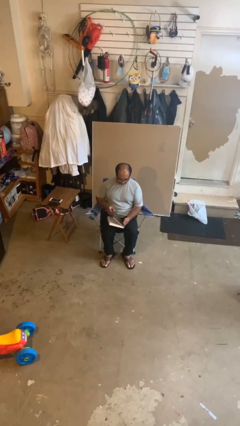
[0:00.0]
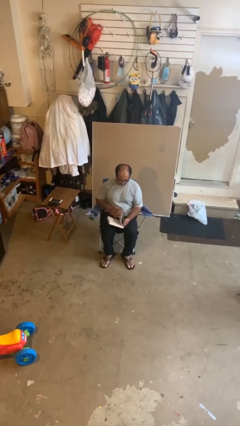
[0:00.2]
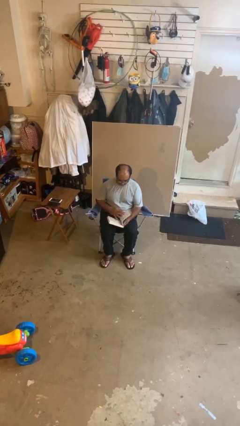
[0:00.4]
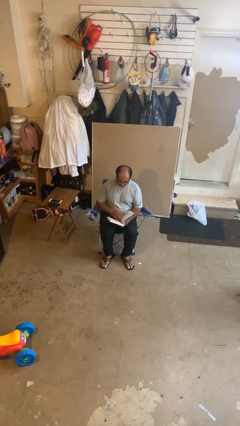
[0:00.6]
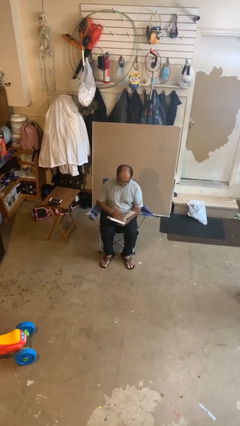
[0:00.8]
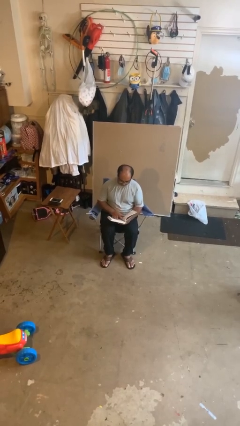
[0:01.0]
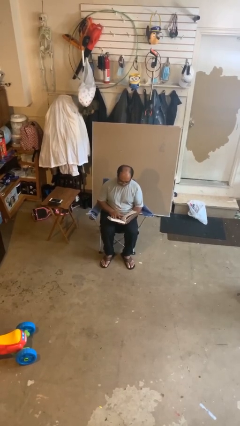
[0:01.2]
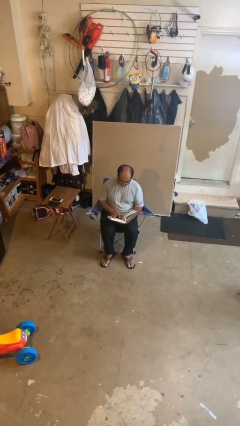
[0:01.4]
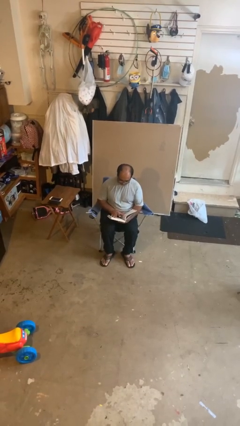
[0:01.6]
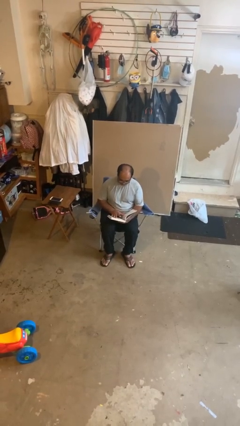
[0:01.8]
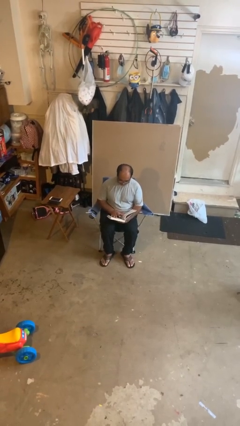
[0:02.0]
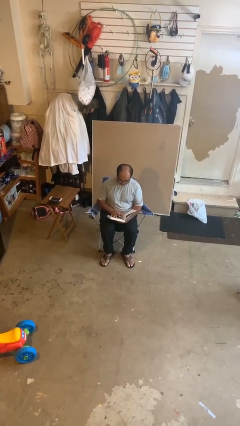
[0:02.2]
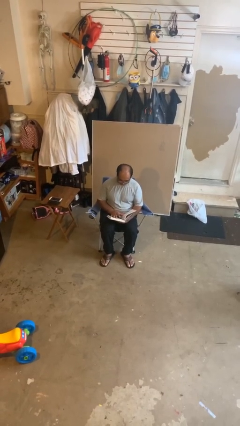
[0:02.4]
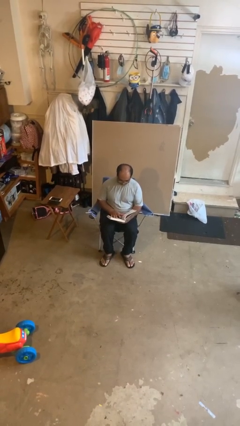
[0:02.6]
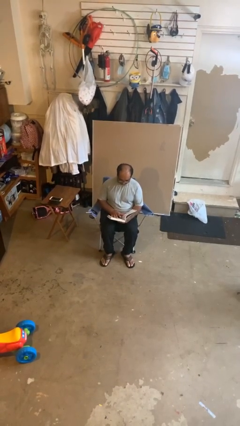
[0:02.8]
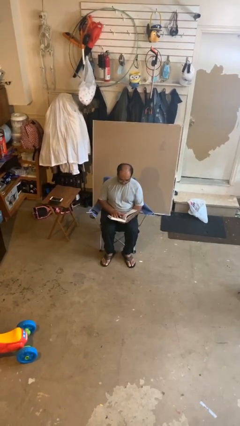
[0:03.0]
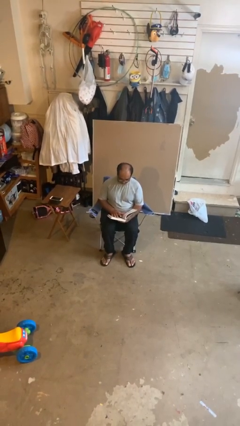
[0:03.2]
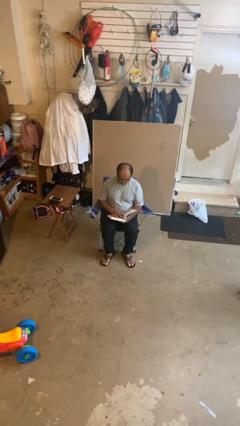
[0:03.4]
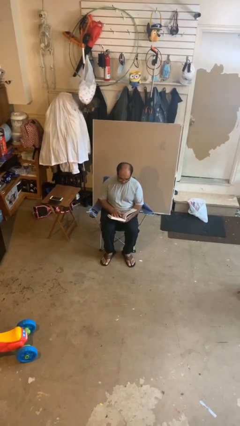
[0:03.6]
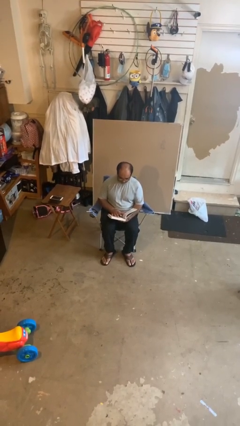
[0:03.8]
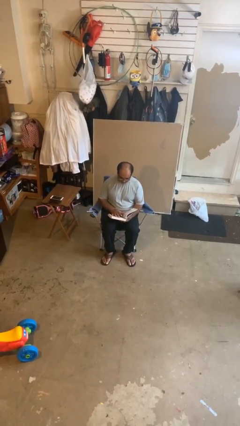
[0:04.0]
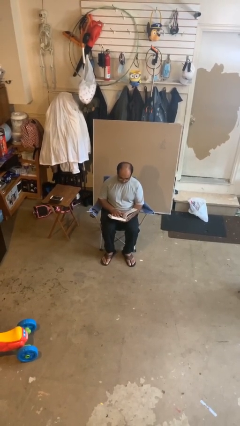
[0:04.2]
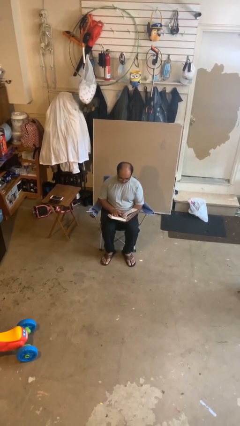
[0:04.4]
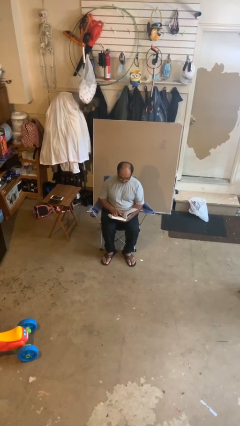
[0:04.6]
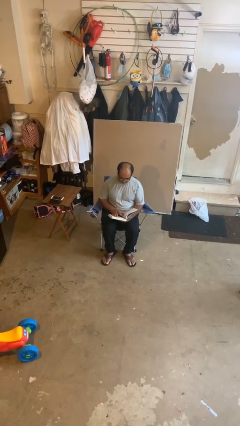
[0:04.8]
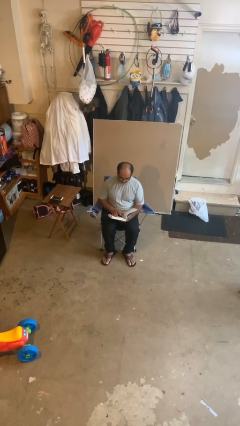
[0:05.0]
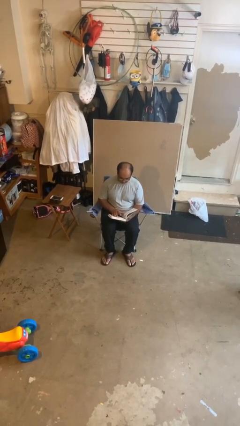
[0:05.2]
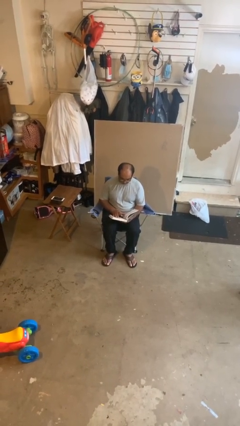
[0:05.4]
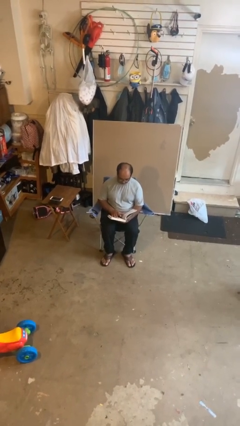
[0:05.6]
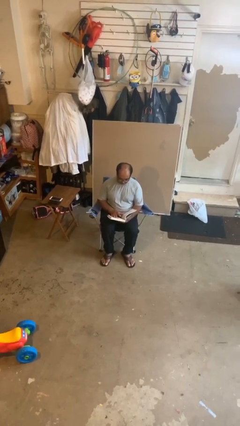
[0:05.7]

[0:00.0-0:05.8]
person reads document

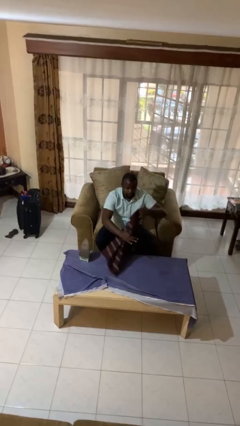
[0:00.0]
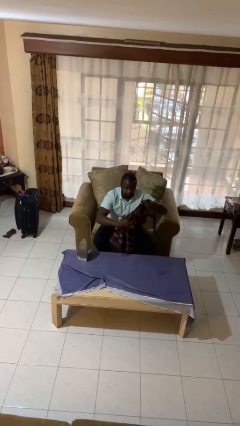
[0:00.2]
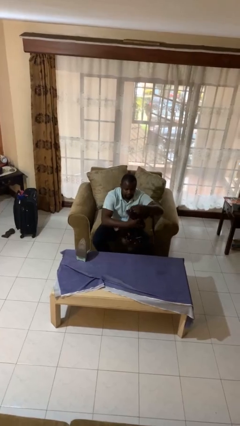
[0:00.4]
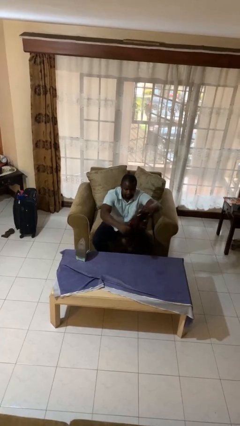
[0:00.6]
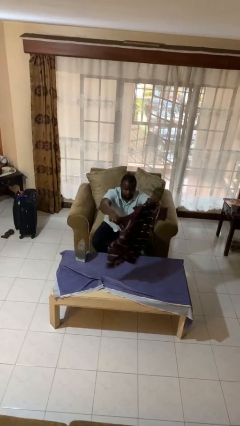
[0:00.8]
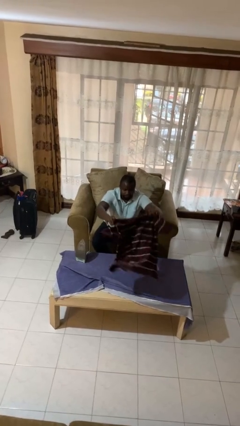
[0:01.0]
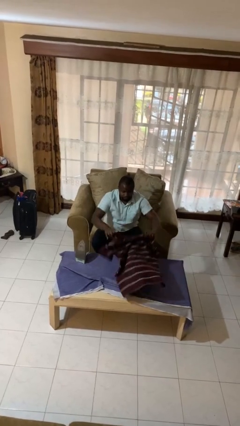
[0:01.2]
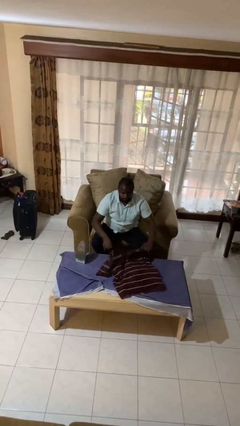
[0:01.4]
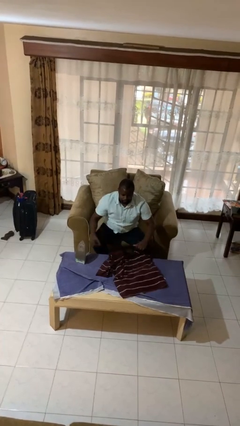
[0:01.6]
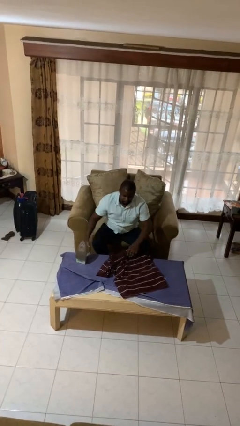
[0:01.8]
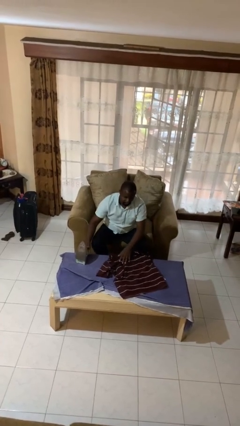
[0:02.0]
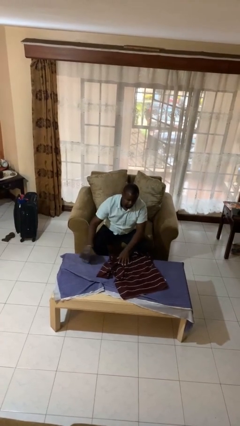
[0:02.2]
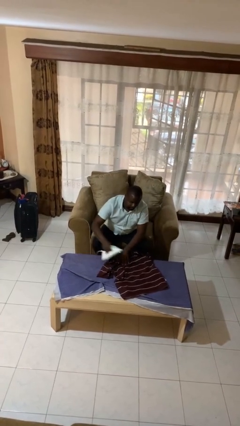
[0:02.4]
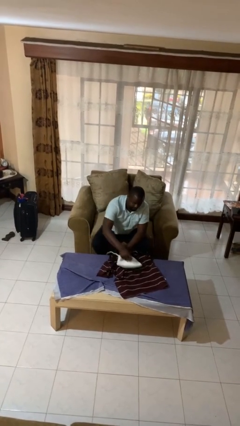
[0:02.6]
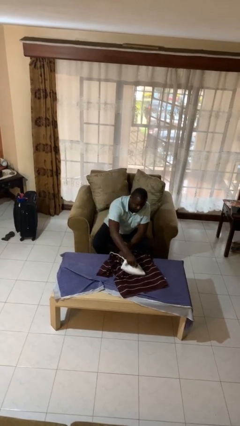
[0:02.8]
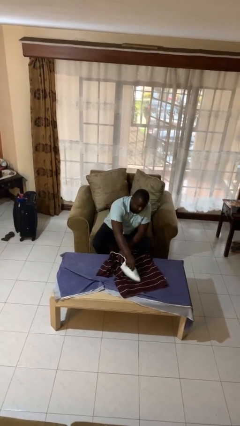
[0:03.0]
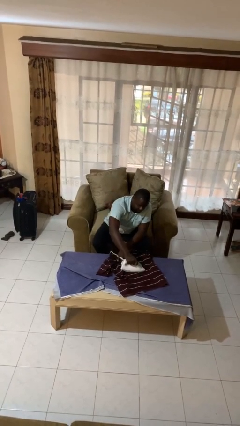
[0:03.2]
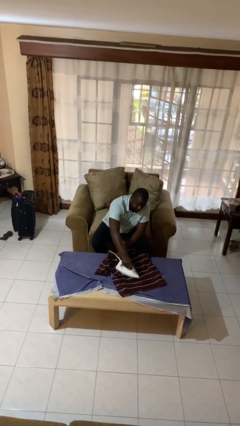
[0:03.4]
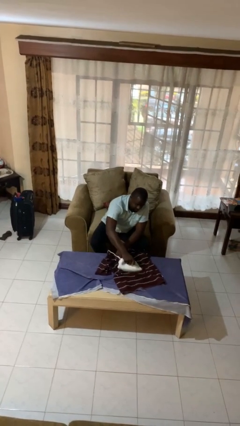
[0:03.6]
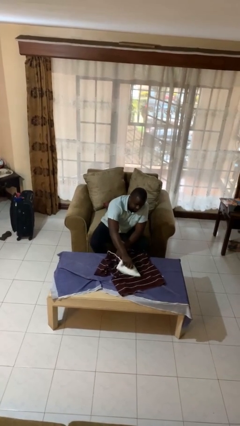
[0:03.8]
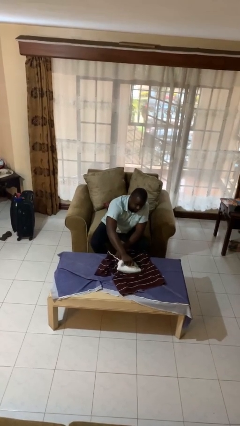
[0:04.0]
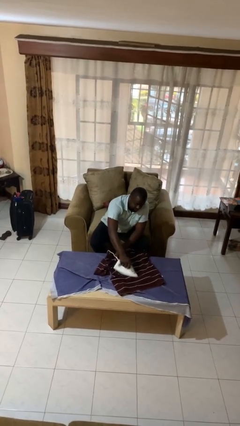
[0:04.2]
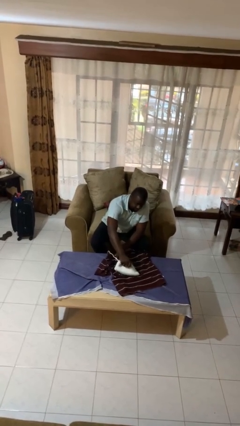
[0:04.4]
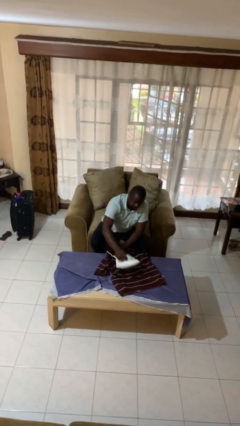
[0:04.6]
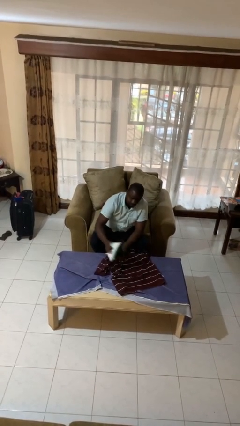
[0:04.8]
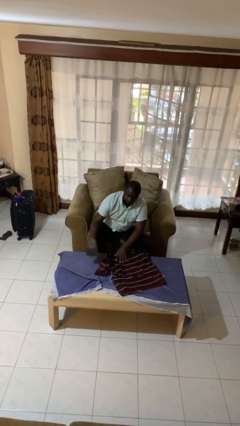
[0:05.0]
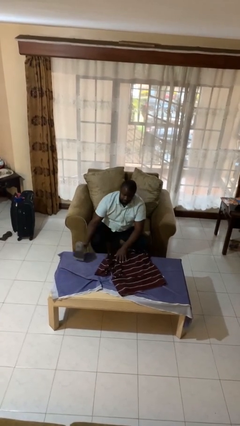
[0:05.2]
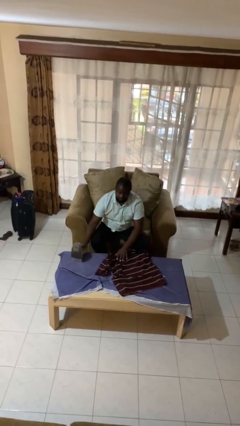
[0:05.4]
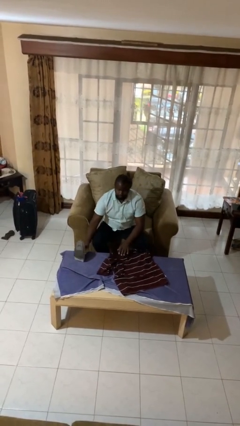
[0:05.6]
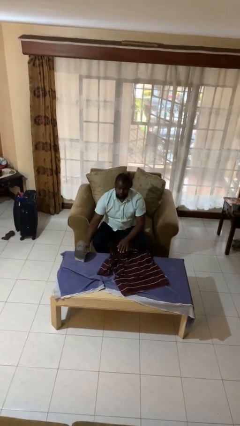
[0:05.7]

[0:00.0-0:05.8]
person irons clothes

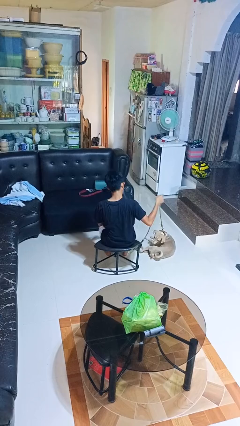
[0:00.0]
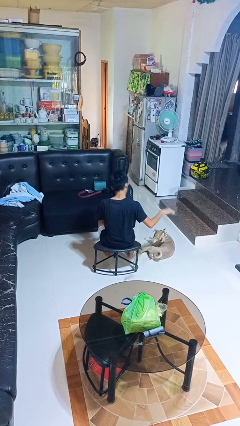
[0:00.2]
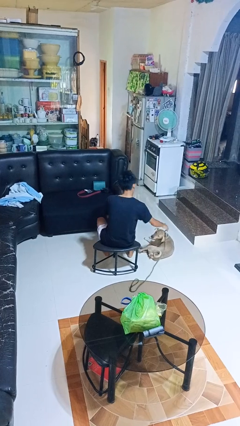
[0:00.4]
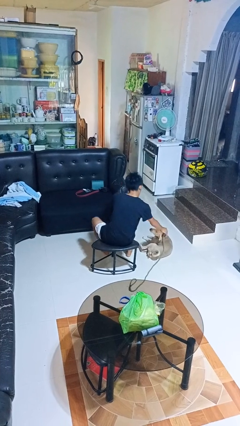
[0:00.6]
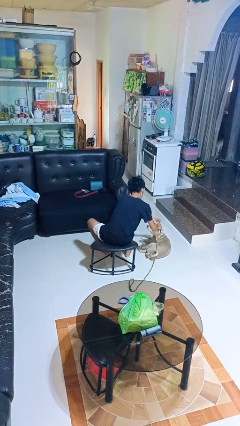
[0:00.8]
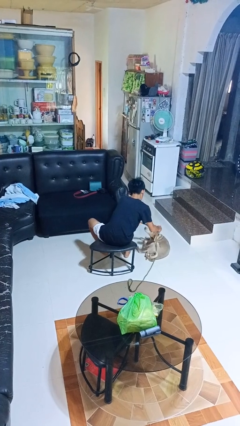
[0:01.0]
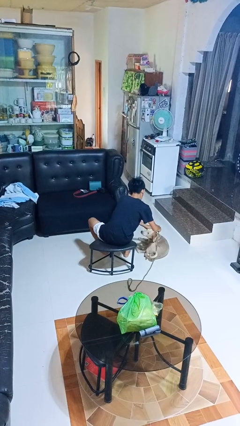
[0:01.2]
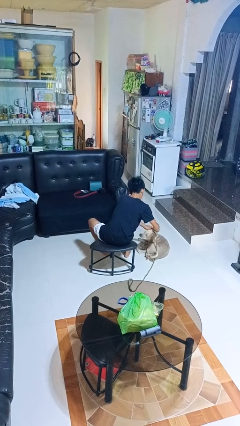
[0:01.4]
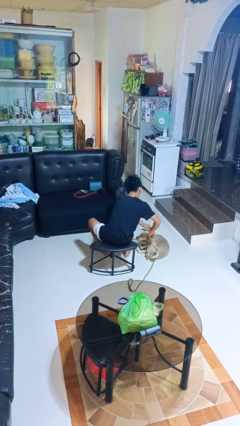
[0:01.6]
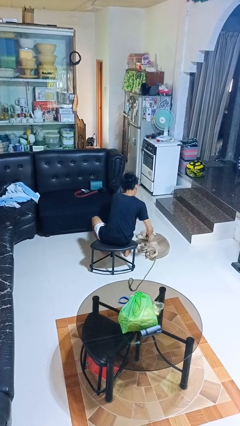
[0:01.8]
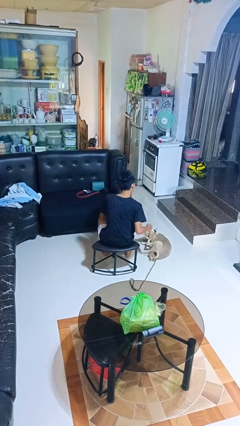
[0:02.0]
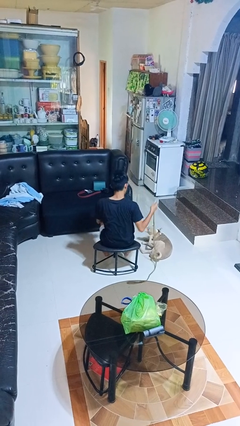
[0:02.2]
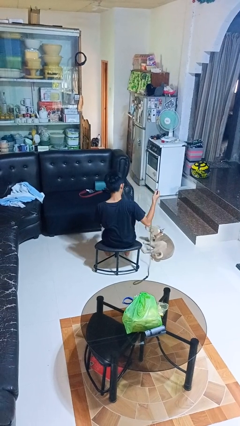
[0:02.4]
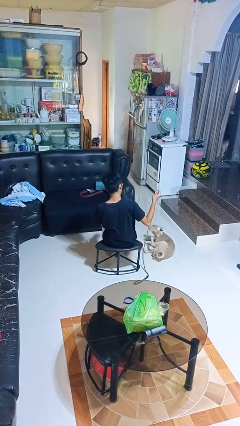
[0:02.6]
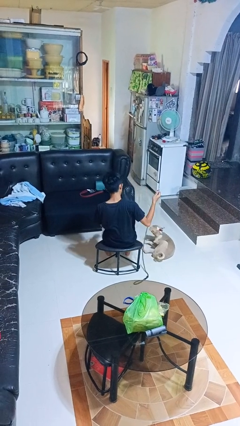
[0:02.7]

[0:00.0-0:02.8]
person unattaches leash from dog

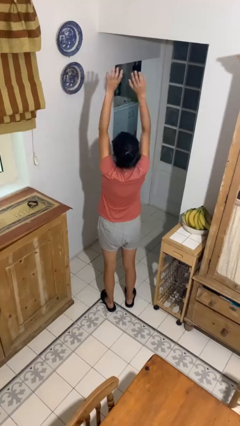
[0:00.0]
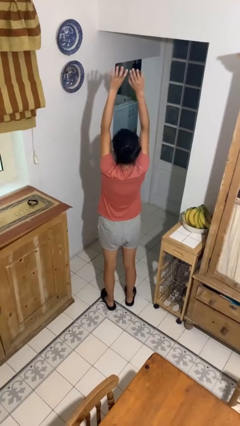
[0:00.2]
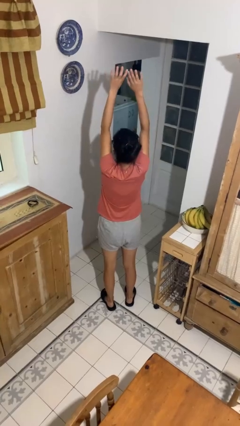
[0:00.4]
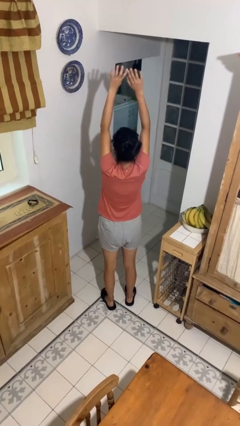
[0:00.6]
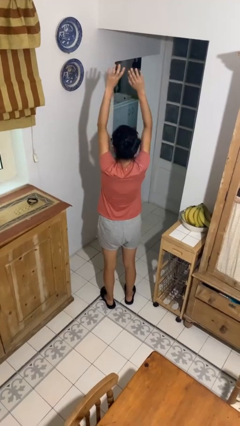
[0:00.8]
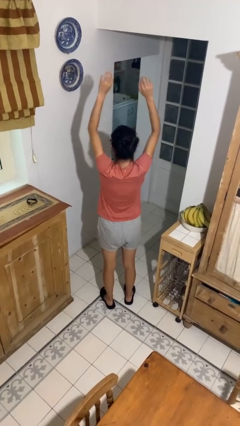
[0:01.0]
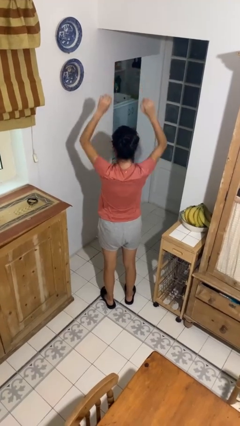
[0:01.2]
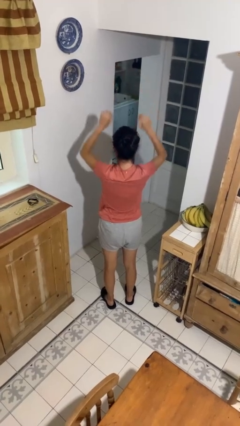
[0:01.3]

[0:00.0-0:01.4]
person stretches arms over head

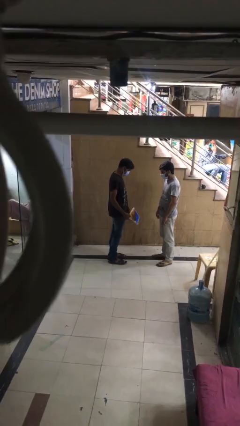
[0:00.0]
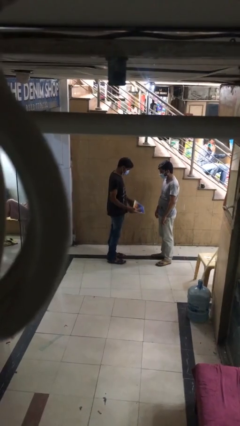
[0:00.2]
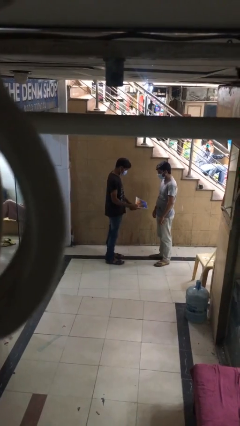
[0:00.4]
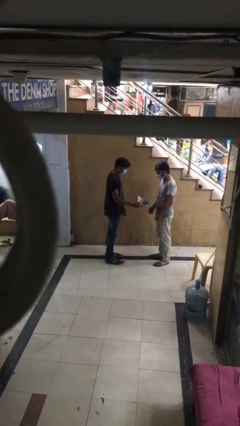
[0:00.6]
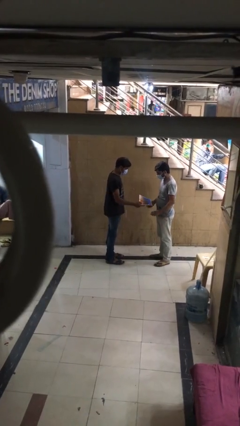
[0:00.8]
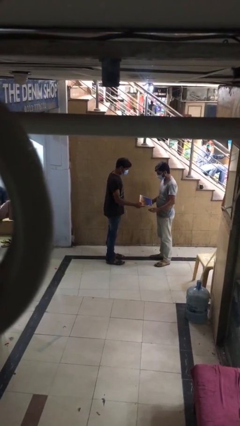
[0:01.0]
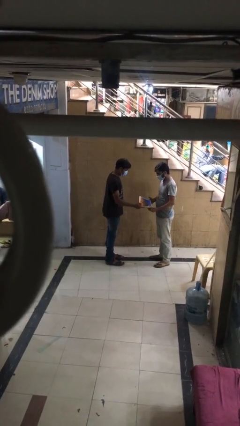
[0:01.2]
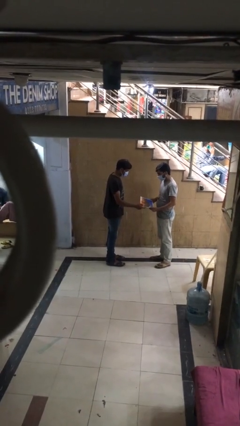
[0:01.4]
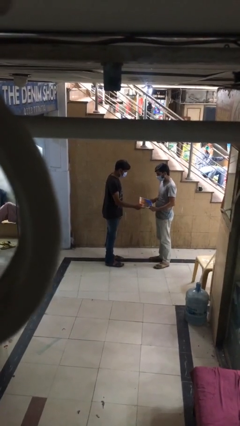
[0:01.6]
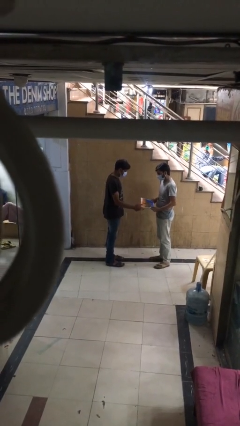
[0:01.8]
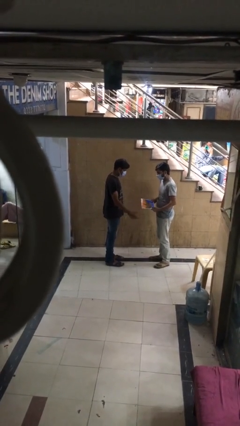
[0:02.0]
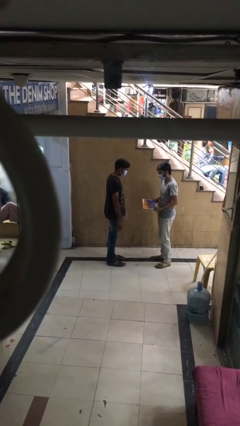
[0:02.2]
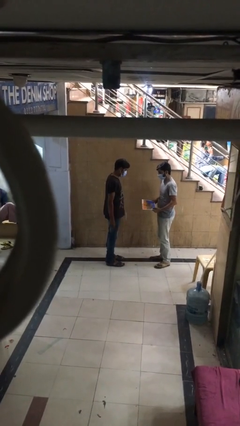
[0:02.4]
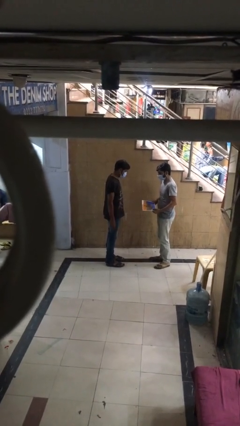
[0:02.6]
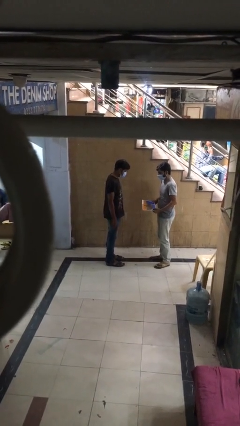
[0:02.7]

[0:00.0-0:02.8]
person transfers object to person
